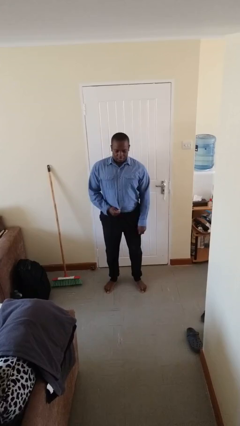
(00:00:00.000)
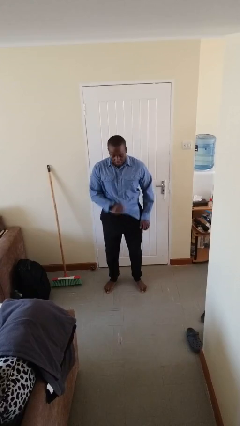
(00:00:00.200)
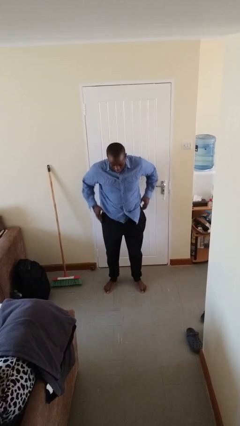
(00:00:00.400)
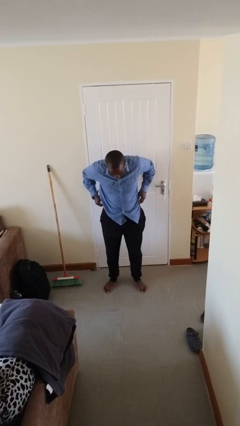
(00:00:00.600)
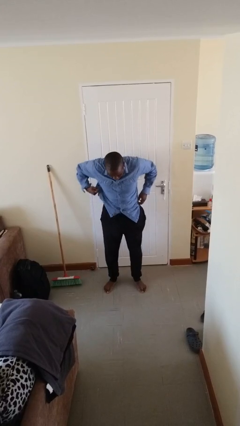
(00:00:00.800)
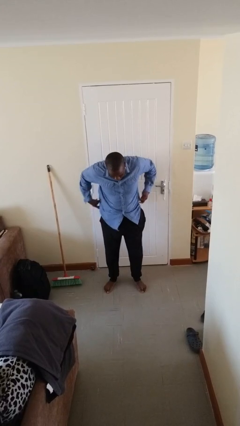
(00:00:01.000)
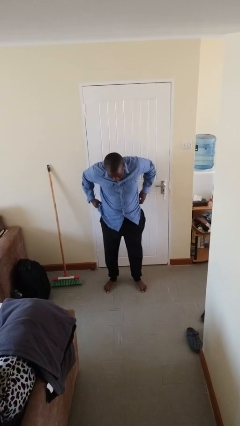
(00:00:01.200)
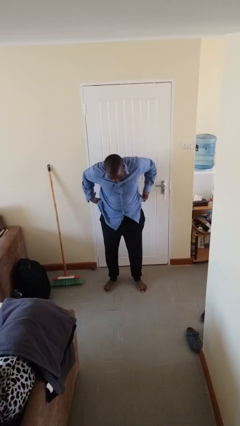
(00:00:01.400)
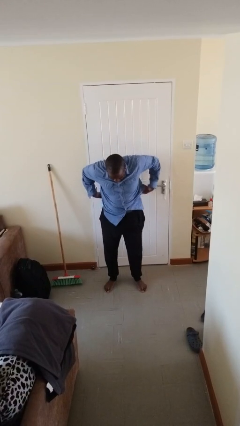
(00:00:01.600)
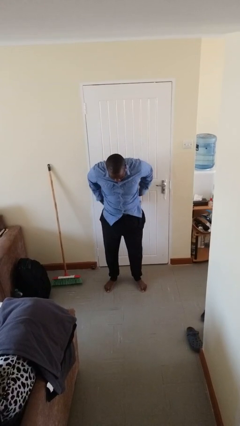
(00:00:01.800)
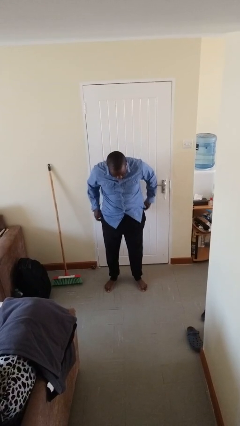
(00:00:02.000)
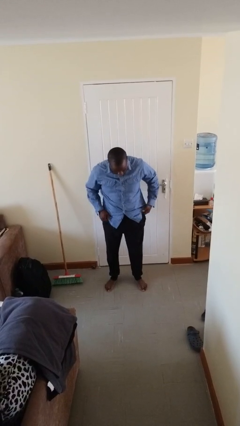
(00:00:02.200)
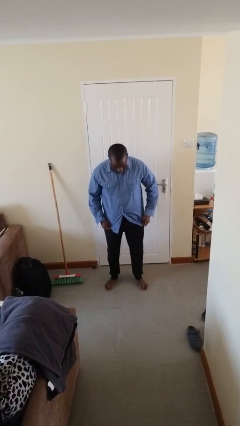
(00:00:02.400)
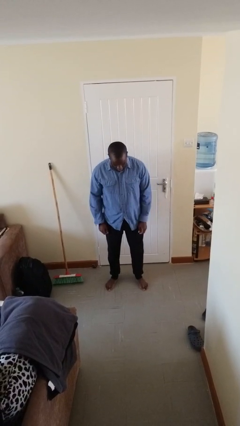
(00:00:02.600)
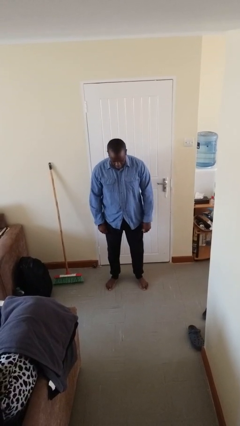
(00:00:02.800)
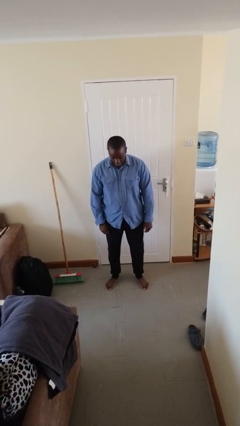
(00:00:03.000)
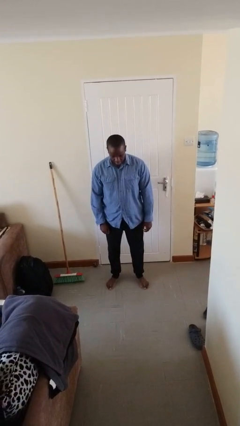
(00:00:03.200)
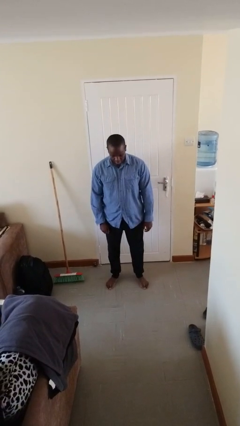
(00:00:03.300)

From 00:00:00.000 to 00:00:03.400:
person untucks shirt

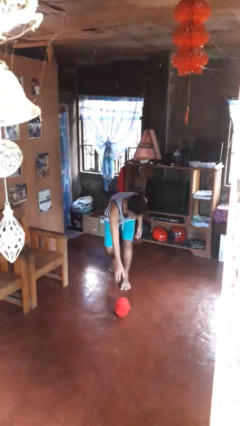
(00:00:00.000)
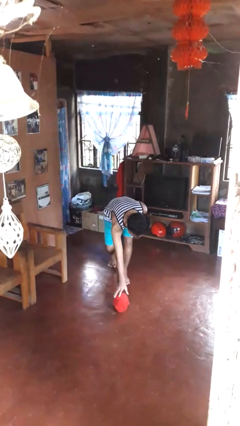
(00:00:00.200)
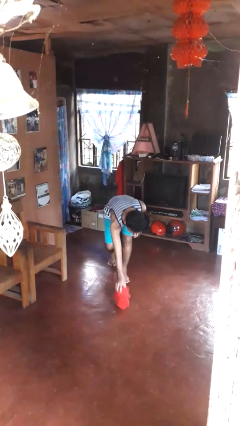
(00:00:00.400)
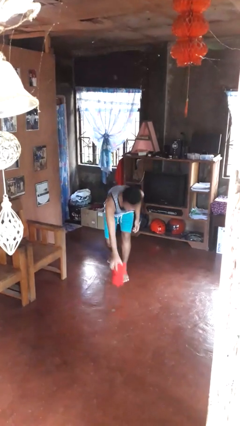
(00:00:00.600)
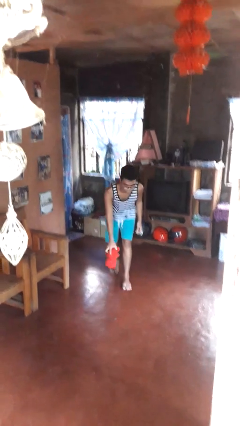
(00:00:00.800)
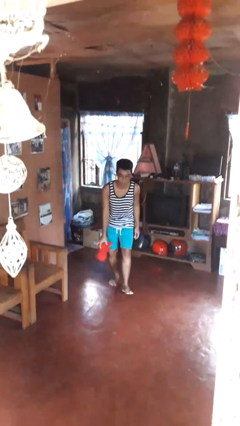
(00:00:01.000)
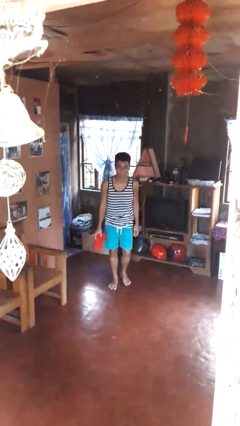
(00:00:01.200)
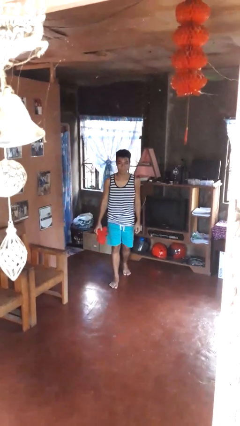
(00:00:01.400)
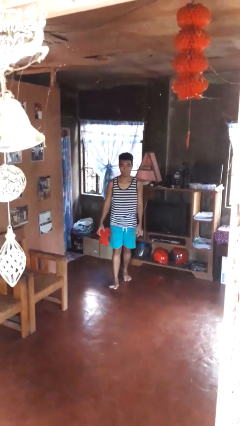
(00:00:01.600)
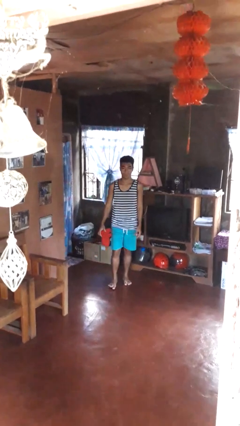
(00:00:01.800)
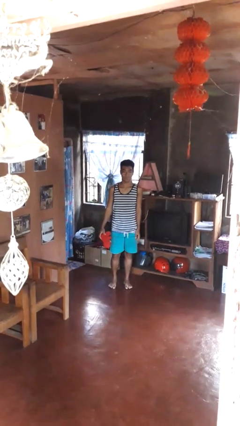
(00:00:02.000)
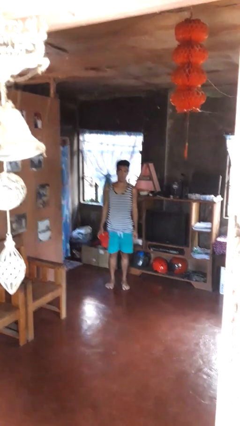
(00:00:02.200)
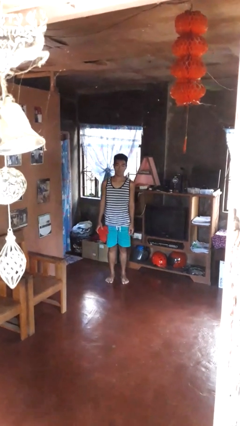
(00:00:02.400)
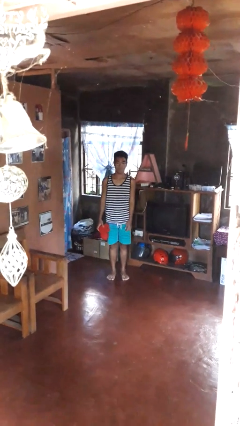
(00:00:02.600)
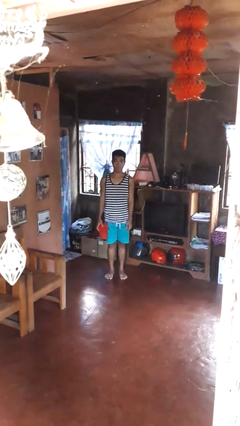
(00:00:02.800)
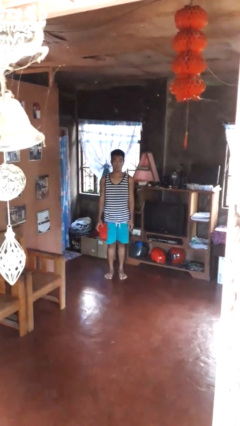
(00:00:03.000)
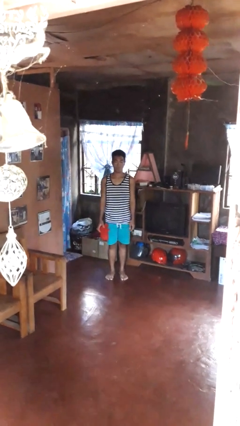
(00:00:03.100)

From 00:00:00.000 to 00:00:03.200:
person picks up object from floor

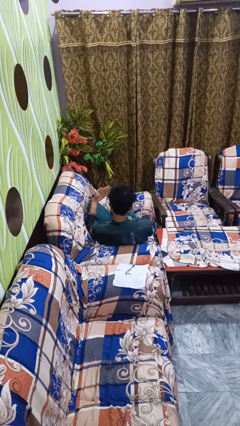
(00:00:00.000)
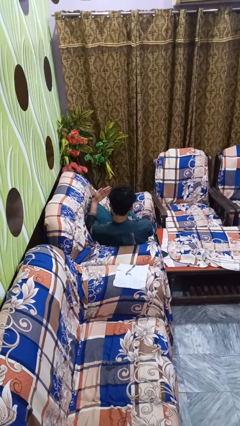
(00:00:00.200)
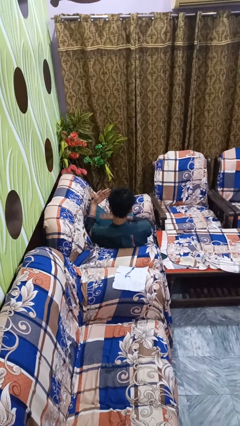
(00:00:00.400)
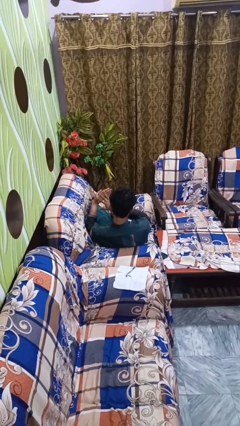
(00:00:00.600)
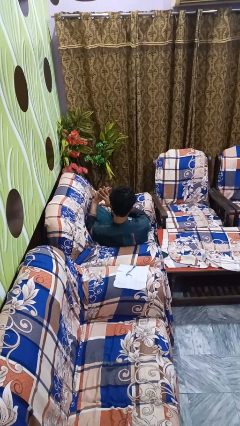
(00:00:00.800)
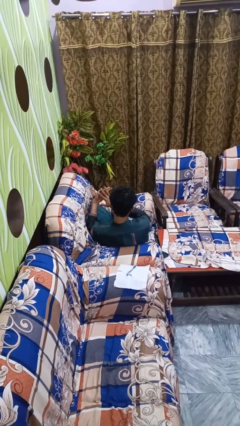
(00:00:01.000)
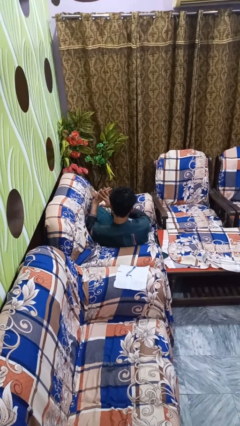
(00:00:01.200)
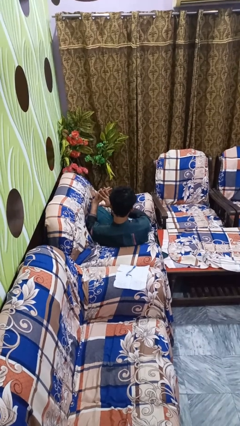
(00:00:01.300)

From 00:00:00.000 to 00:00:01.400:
person gestures number five

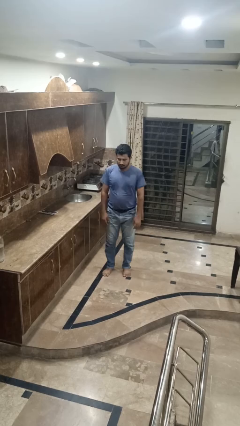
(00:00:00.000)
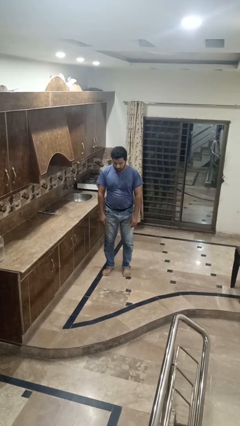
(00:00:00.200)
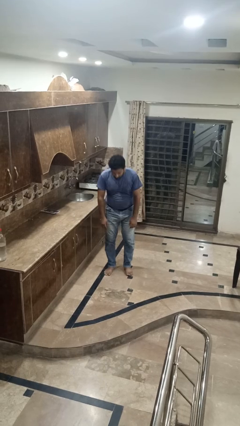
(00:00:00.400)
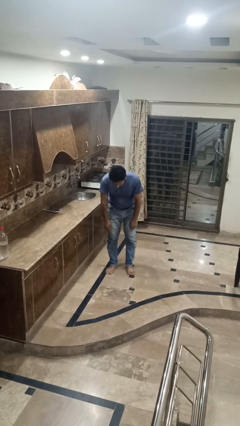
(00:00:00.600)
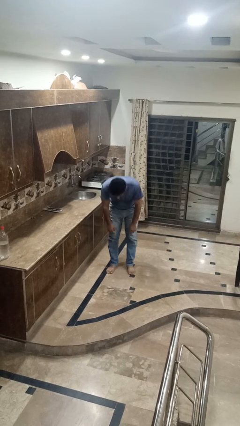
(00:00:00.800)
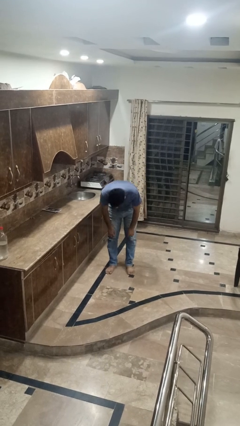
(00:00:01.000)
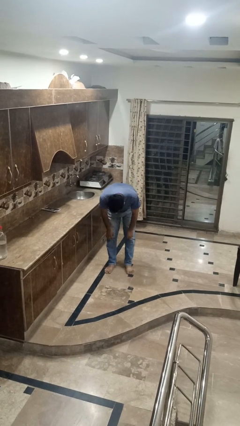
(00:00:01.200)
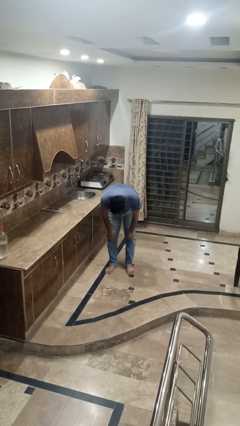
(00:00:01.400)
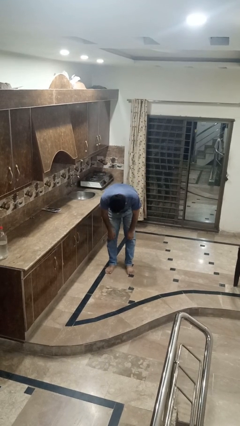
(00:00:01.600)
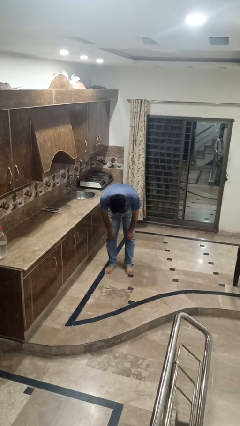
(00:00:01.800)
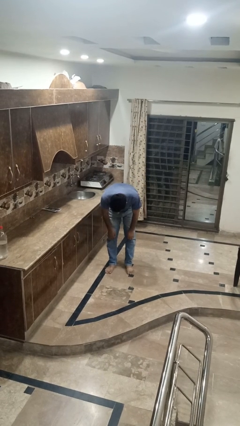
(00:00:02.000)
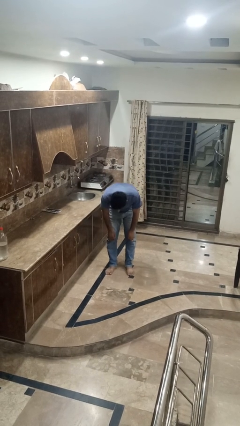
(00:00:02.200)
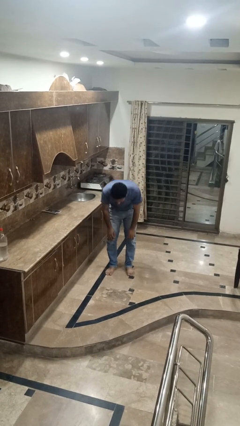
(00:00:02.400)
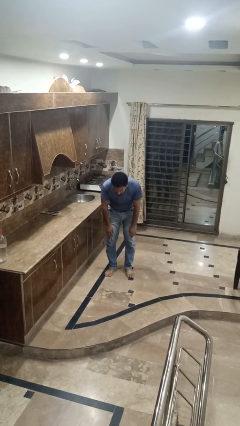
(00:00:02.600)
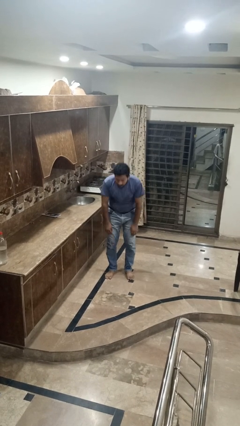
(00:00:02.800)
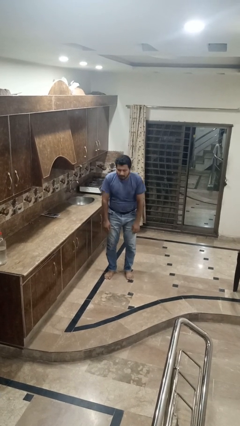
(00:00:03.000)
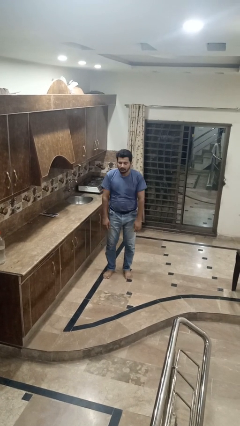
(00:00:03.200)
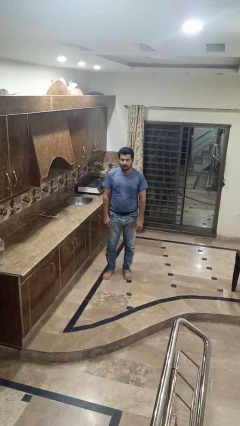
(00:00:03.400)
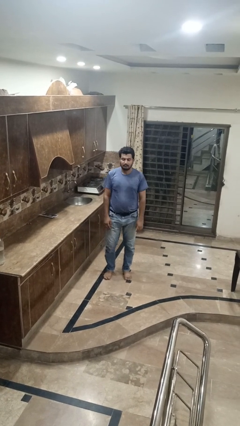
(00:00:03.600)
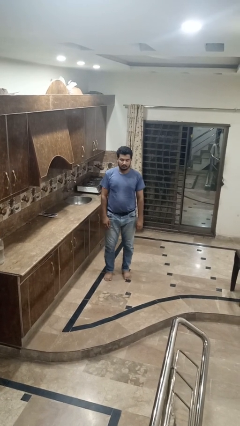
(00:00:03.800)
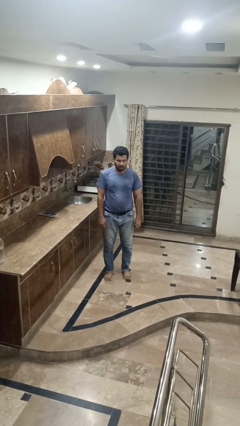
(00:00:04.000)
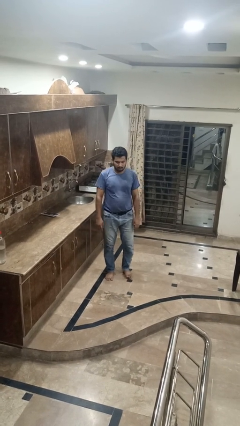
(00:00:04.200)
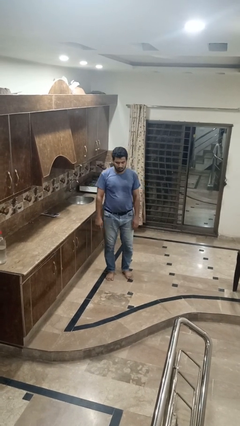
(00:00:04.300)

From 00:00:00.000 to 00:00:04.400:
person bows

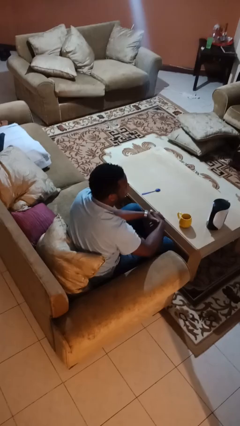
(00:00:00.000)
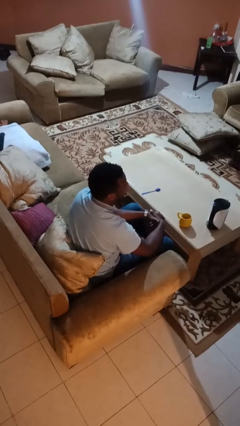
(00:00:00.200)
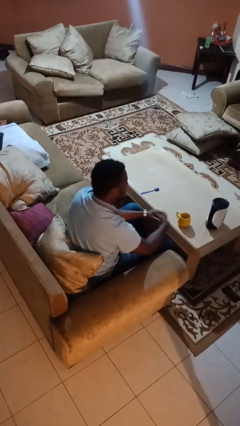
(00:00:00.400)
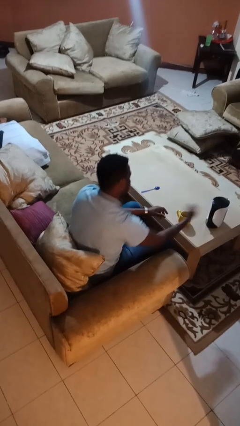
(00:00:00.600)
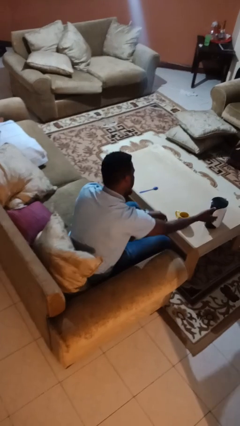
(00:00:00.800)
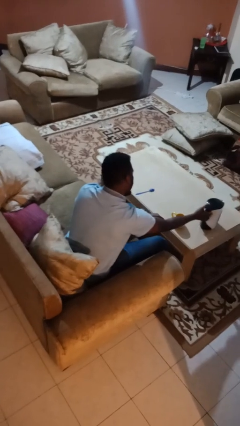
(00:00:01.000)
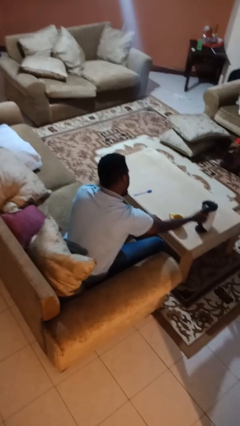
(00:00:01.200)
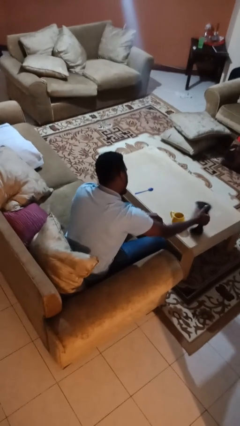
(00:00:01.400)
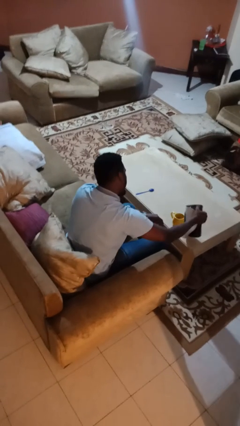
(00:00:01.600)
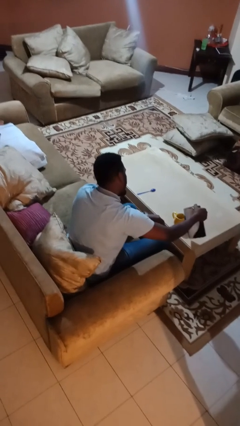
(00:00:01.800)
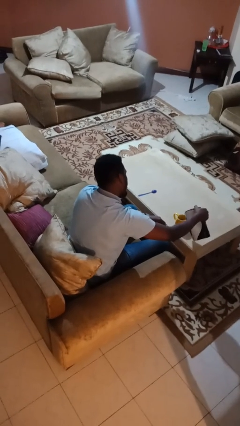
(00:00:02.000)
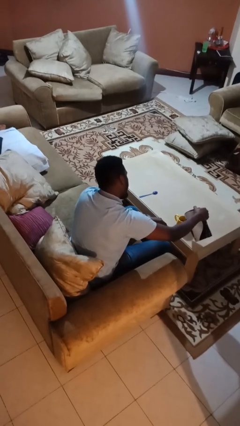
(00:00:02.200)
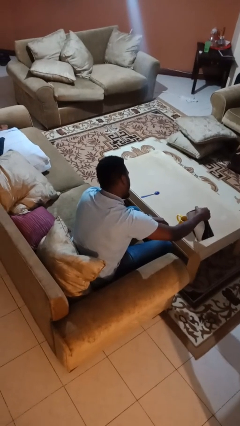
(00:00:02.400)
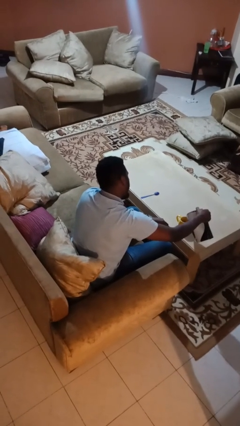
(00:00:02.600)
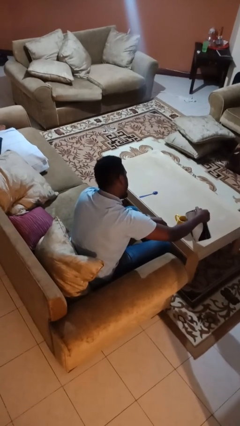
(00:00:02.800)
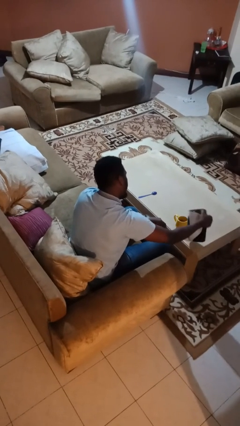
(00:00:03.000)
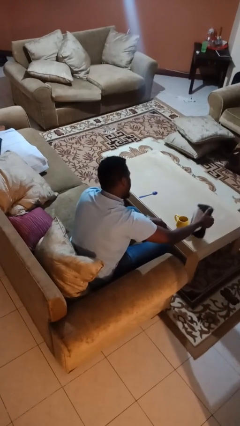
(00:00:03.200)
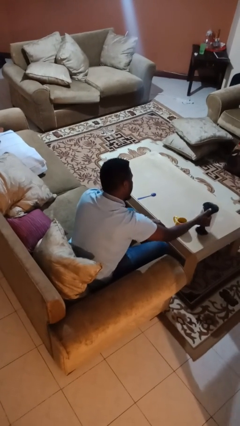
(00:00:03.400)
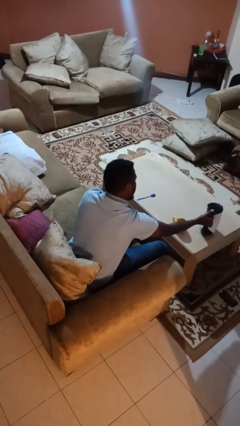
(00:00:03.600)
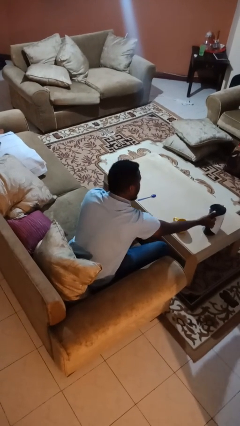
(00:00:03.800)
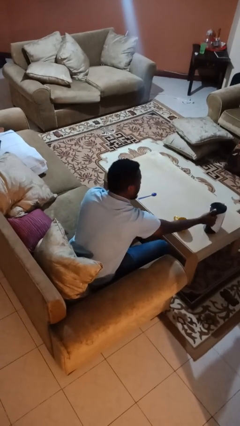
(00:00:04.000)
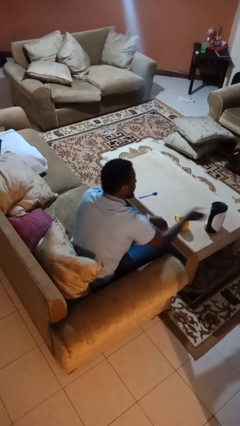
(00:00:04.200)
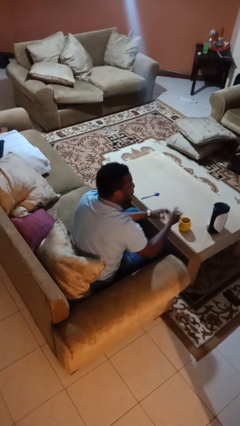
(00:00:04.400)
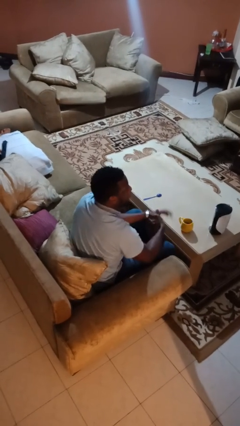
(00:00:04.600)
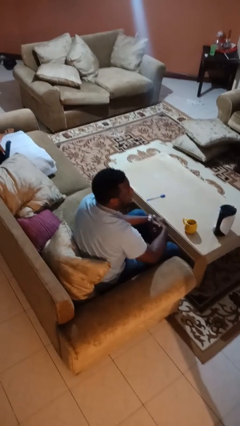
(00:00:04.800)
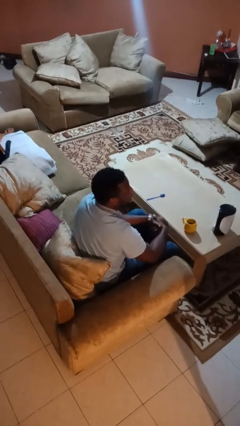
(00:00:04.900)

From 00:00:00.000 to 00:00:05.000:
person pours coffee into mug

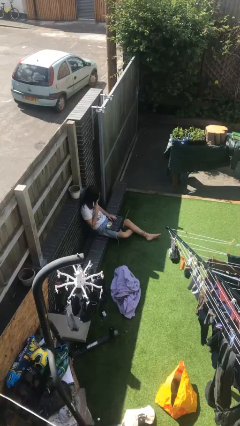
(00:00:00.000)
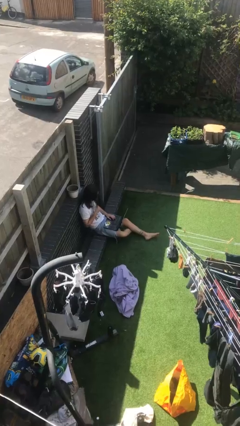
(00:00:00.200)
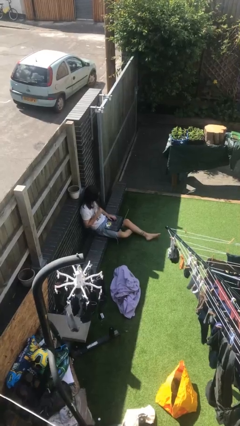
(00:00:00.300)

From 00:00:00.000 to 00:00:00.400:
person interacts with laptop
